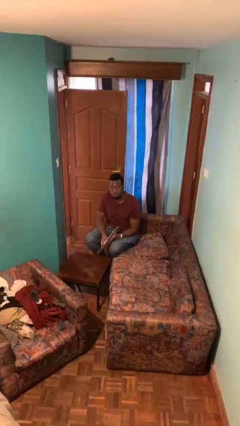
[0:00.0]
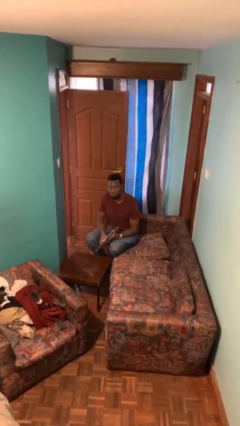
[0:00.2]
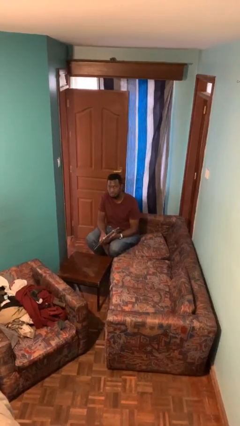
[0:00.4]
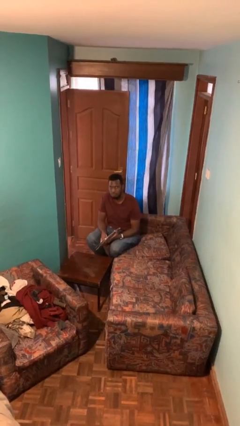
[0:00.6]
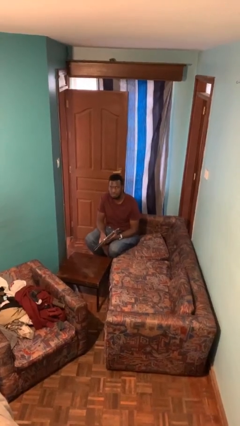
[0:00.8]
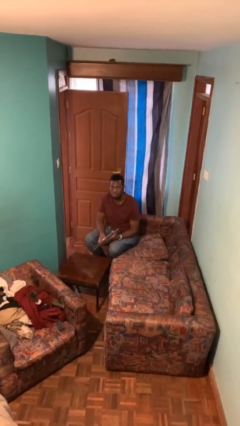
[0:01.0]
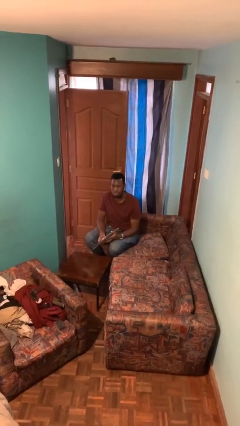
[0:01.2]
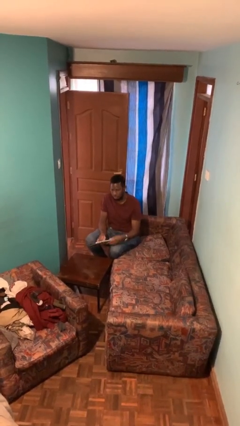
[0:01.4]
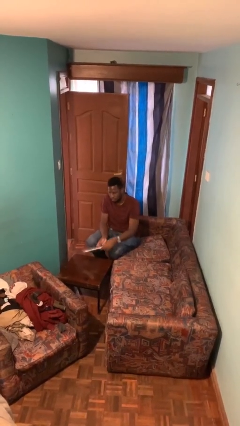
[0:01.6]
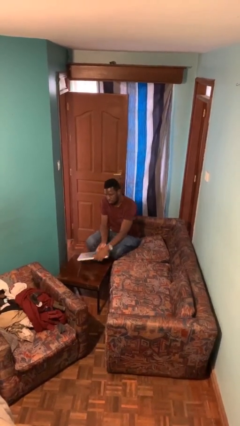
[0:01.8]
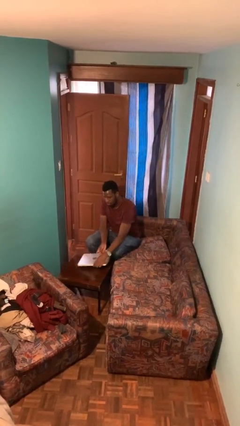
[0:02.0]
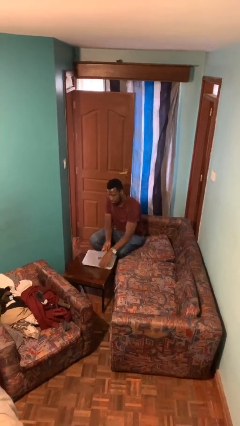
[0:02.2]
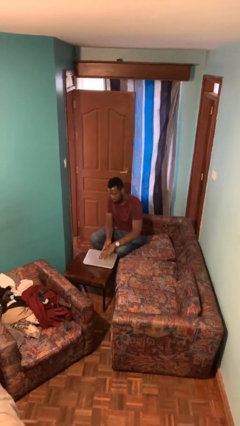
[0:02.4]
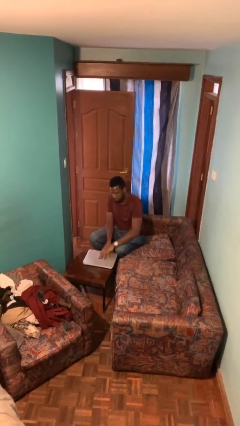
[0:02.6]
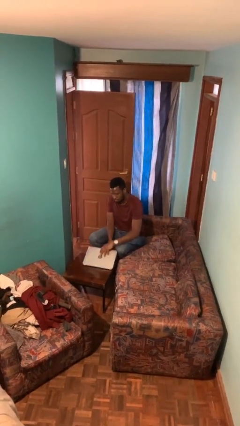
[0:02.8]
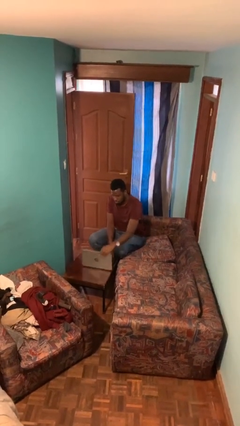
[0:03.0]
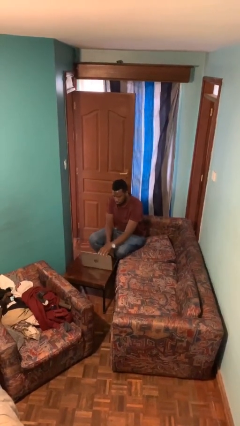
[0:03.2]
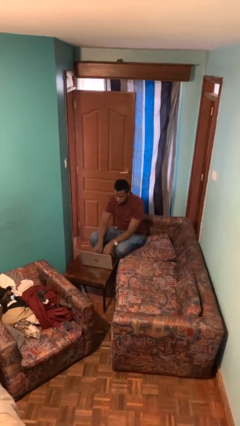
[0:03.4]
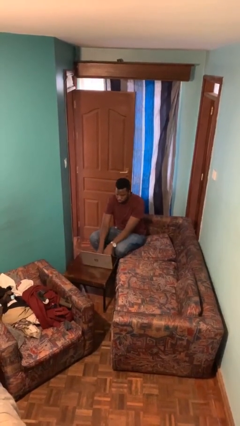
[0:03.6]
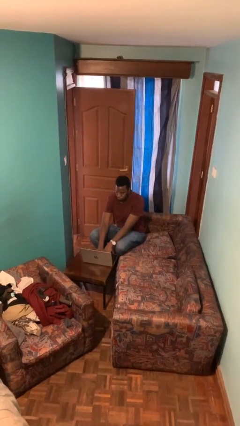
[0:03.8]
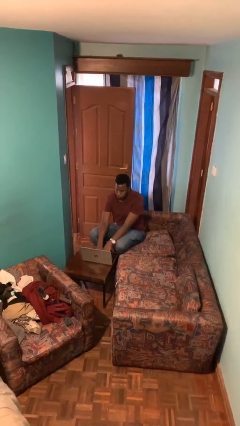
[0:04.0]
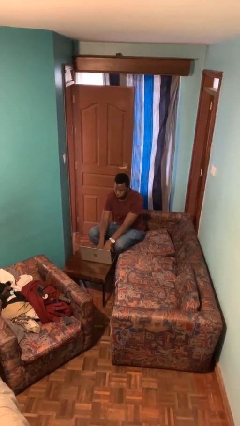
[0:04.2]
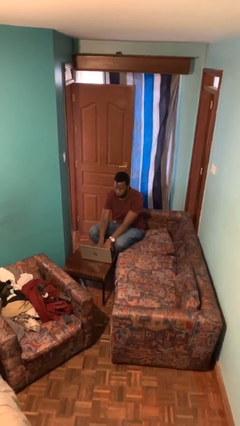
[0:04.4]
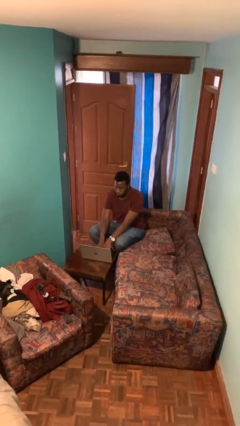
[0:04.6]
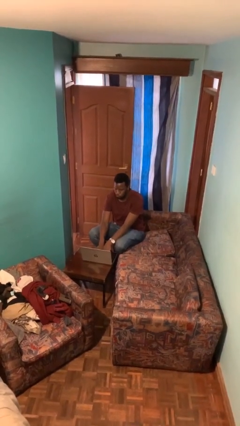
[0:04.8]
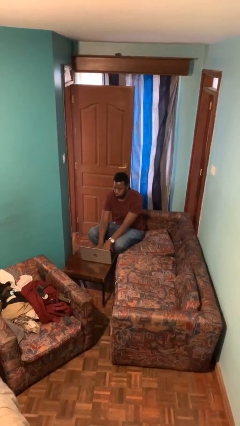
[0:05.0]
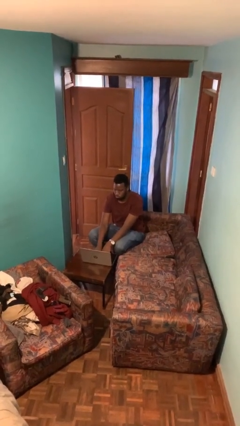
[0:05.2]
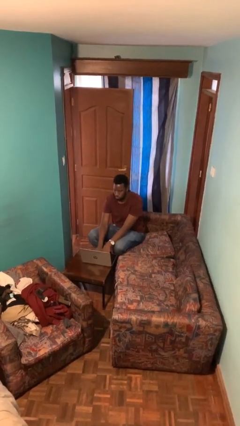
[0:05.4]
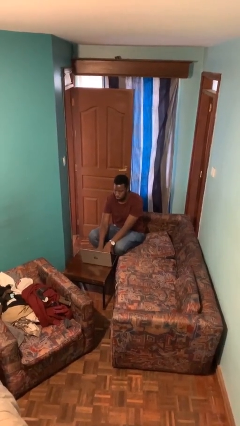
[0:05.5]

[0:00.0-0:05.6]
person interacts with laptop

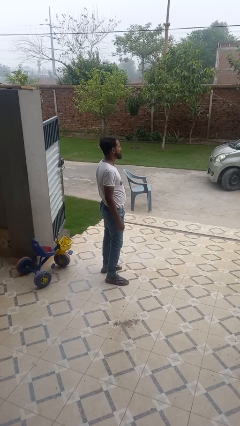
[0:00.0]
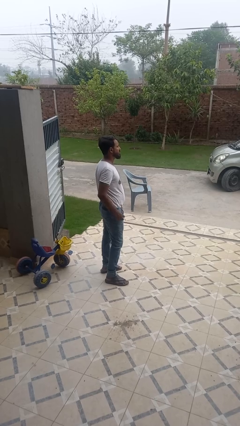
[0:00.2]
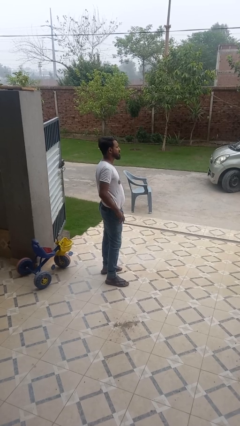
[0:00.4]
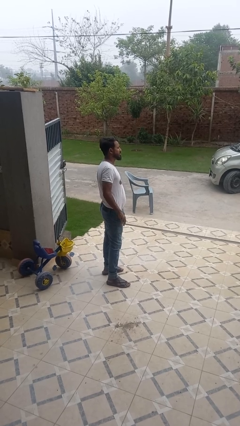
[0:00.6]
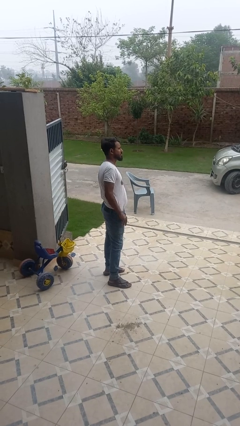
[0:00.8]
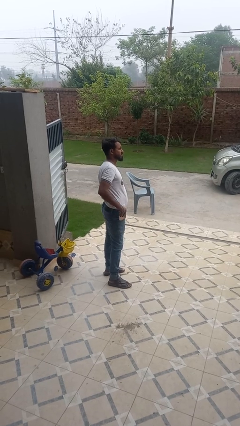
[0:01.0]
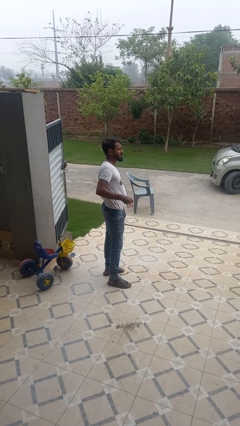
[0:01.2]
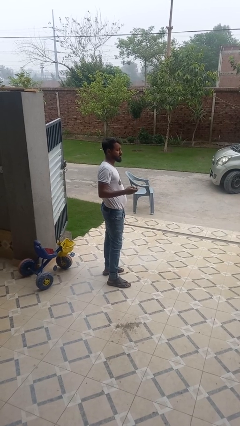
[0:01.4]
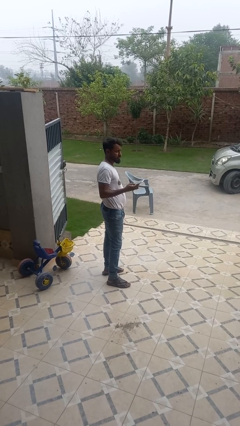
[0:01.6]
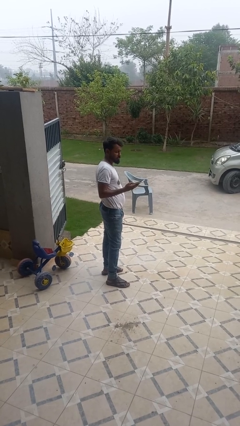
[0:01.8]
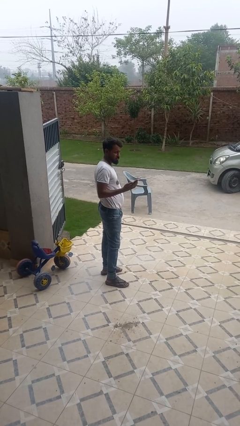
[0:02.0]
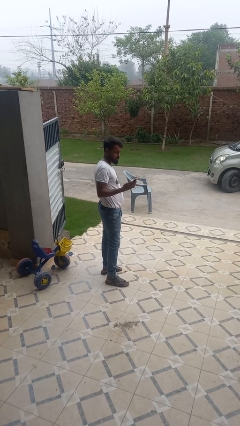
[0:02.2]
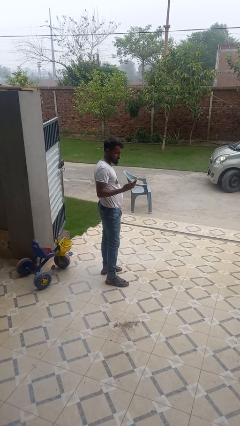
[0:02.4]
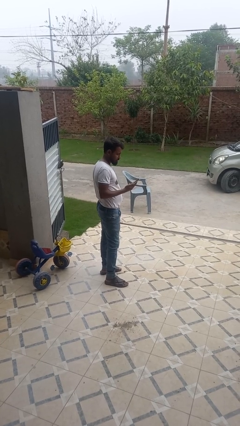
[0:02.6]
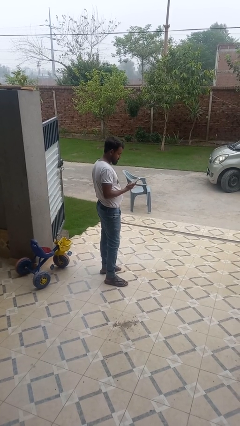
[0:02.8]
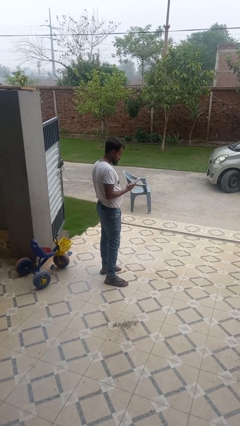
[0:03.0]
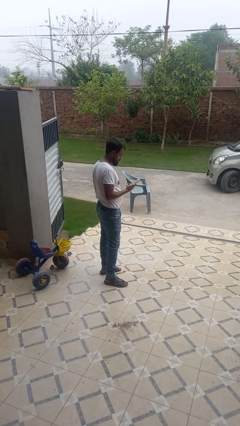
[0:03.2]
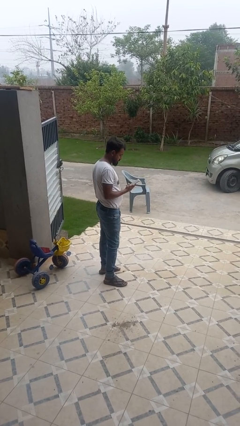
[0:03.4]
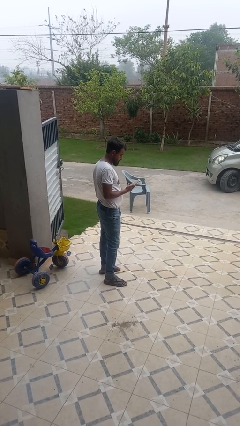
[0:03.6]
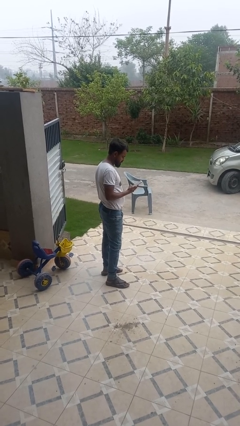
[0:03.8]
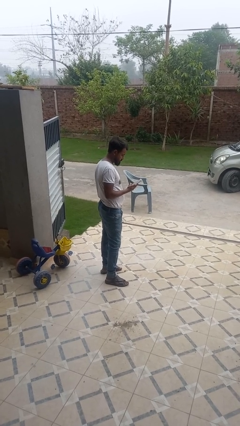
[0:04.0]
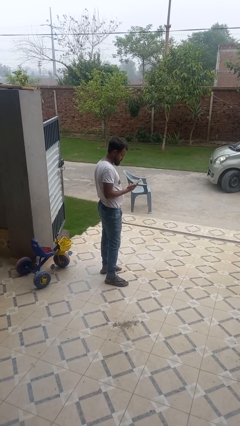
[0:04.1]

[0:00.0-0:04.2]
person takes phone from pocket

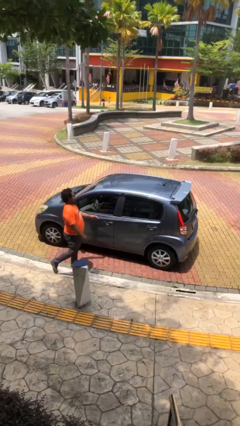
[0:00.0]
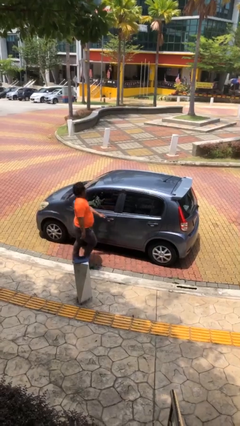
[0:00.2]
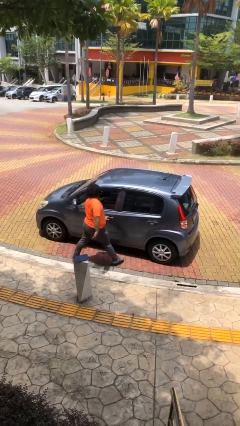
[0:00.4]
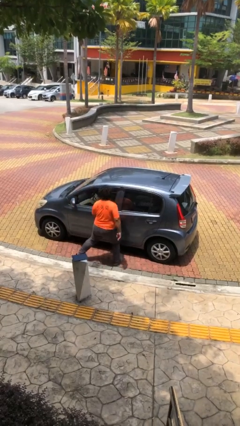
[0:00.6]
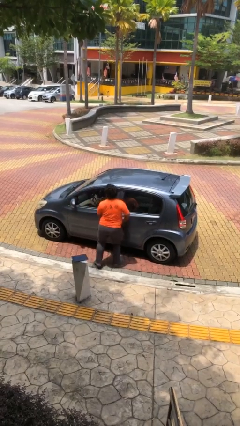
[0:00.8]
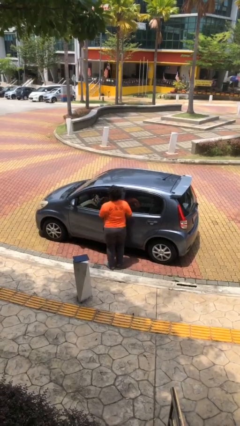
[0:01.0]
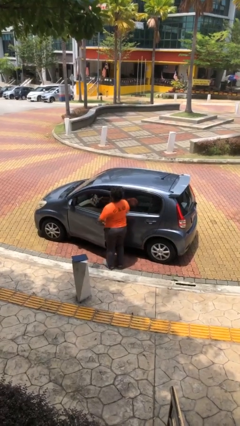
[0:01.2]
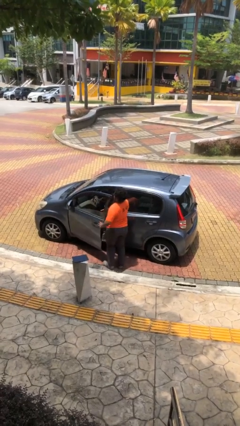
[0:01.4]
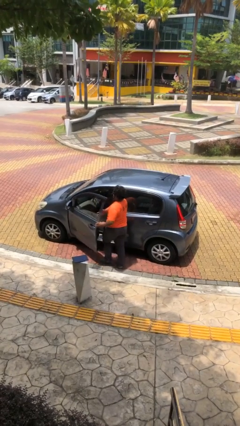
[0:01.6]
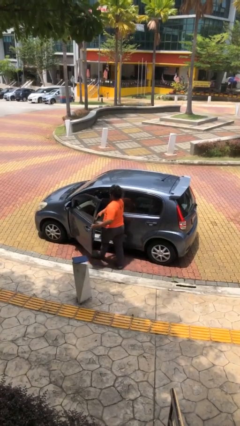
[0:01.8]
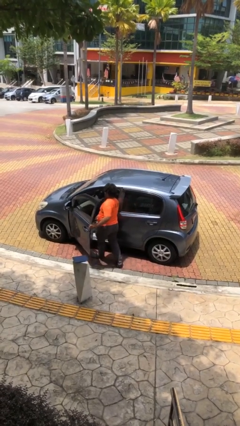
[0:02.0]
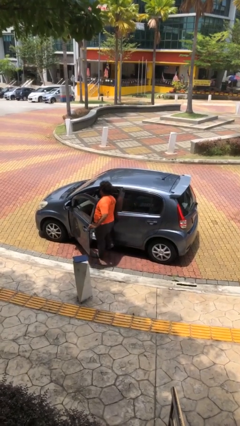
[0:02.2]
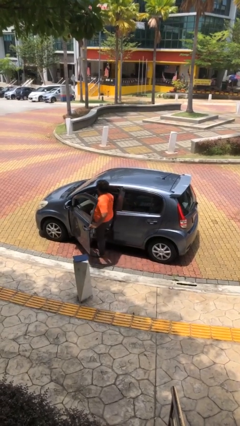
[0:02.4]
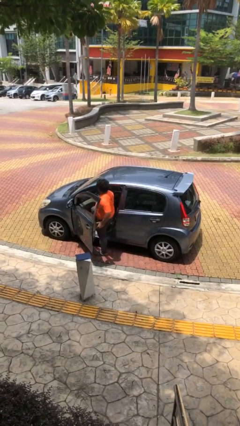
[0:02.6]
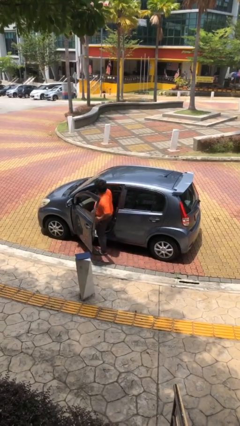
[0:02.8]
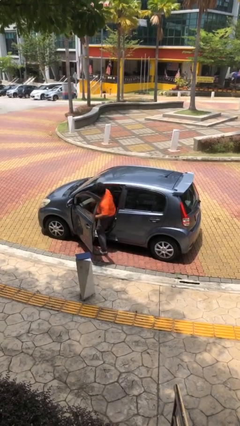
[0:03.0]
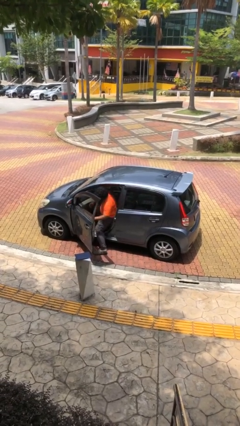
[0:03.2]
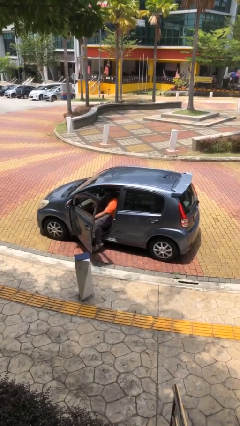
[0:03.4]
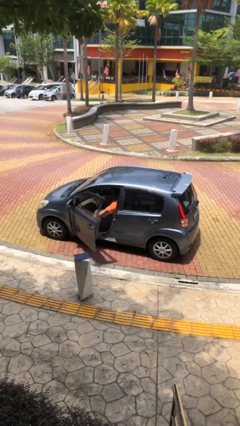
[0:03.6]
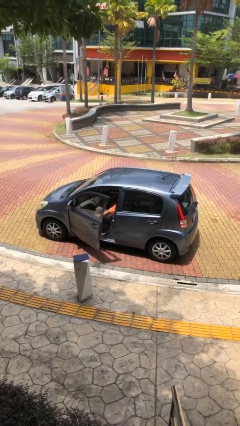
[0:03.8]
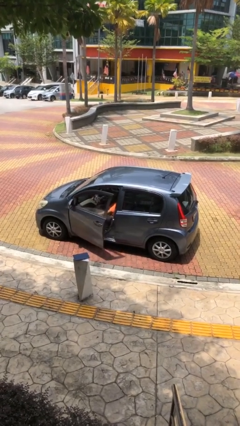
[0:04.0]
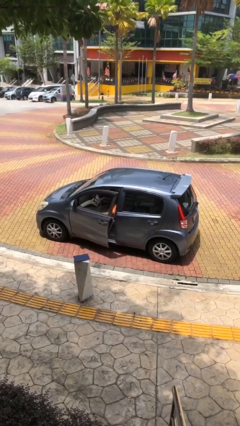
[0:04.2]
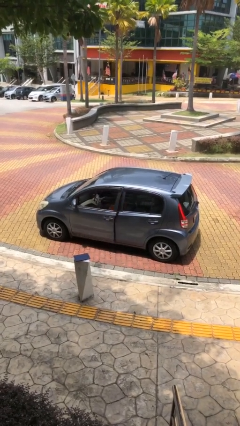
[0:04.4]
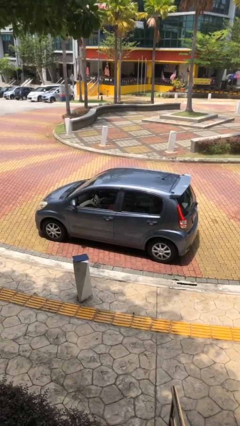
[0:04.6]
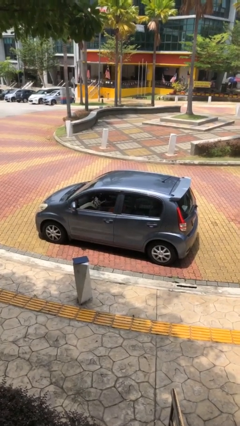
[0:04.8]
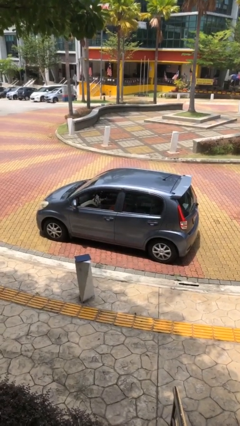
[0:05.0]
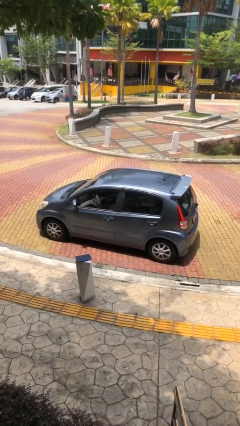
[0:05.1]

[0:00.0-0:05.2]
car picks up person

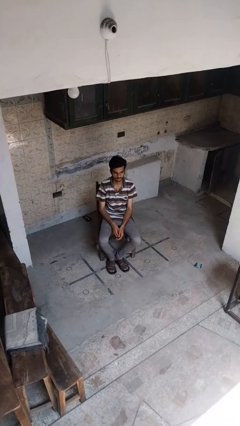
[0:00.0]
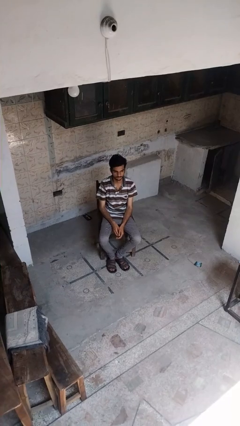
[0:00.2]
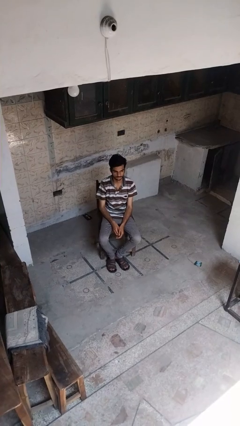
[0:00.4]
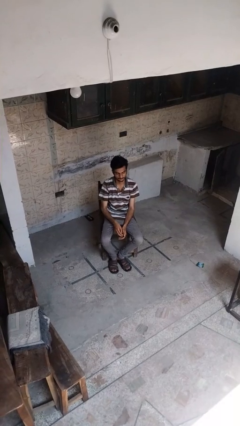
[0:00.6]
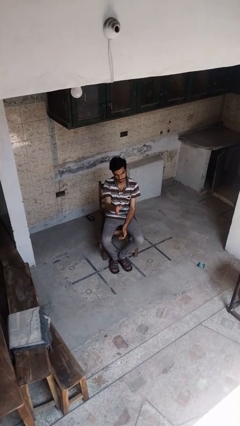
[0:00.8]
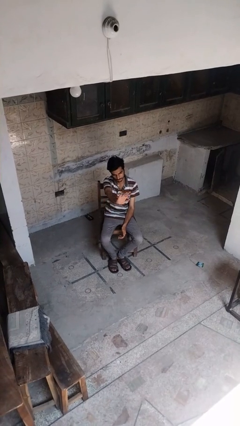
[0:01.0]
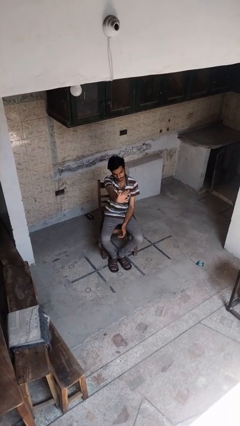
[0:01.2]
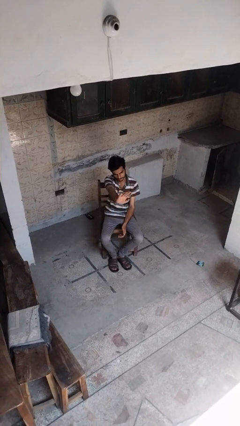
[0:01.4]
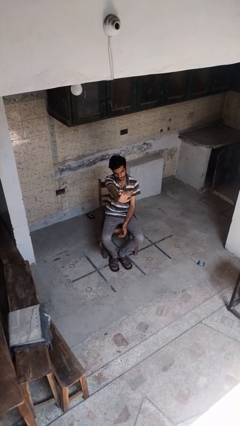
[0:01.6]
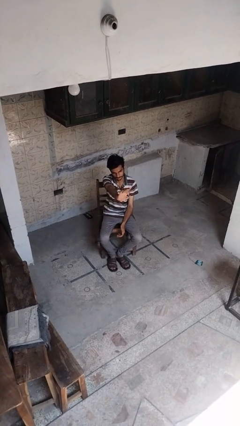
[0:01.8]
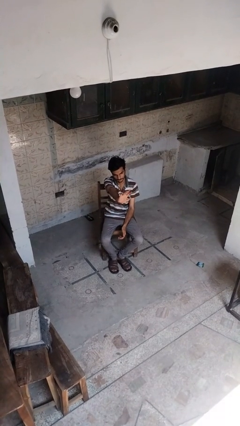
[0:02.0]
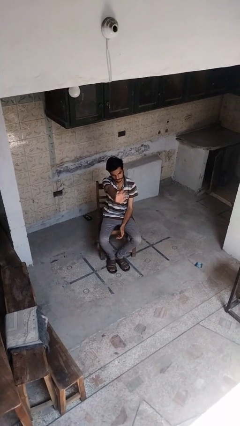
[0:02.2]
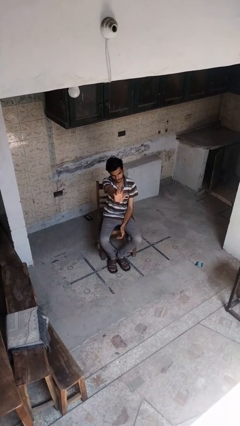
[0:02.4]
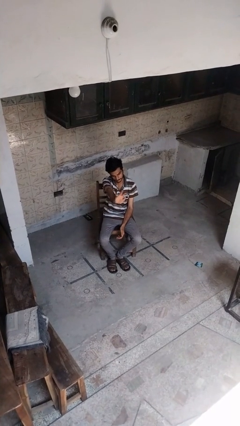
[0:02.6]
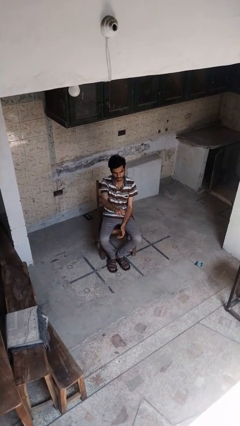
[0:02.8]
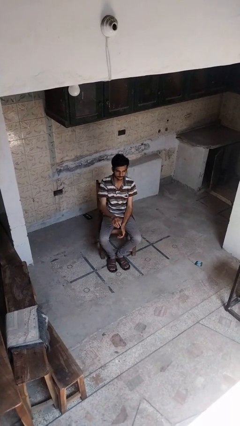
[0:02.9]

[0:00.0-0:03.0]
person waves at person
